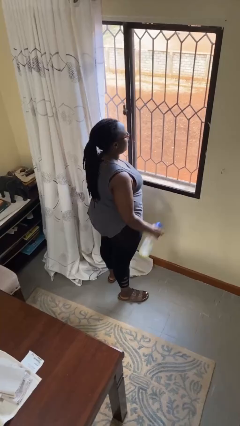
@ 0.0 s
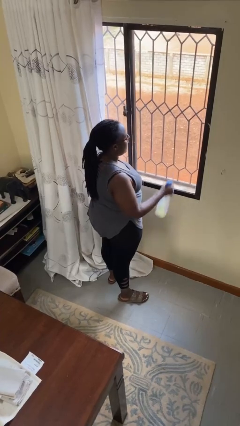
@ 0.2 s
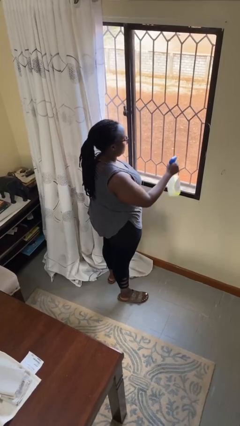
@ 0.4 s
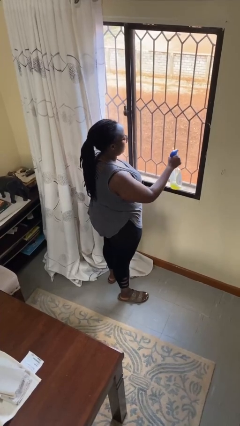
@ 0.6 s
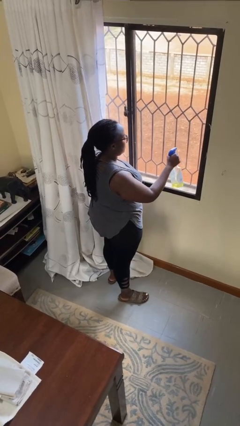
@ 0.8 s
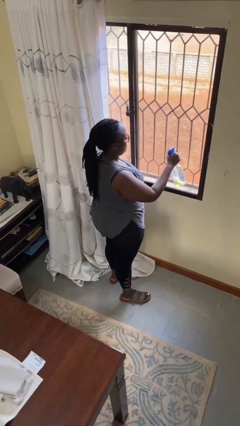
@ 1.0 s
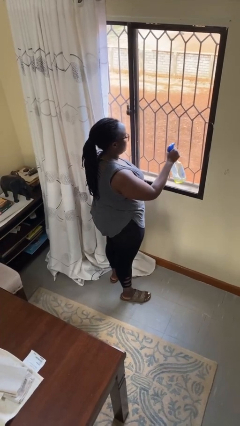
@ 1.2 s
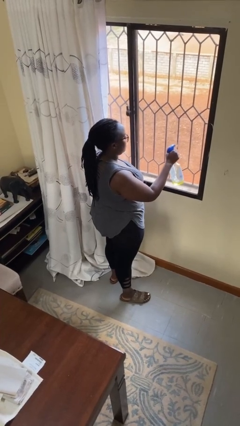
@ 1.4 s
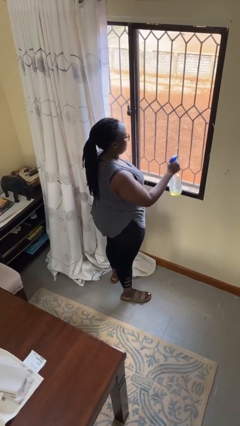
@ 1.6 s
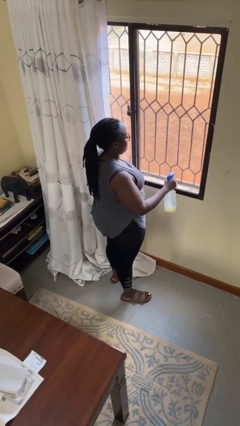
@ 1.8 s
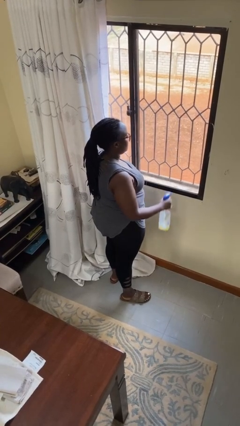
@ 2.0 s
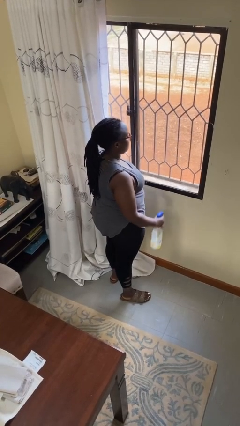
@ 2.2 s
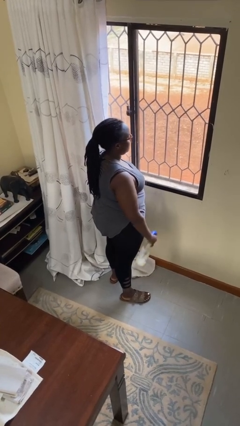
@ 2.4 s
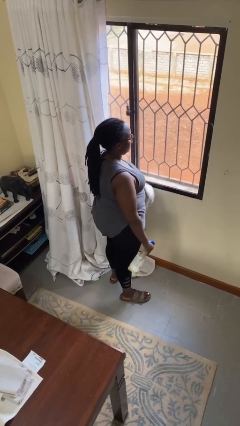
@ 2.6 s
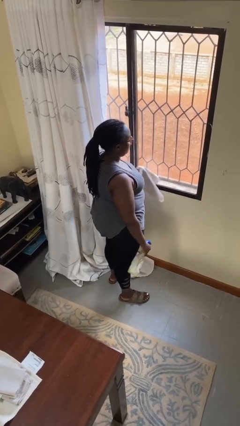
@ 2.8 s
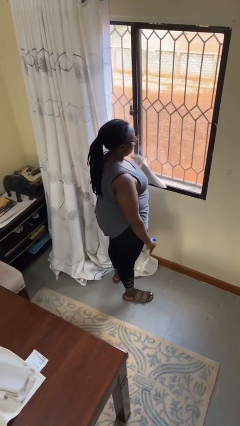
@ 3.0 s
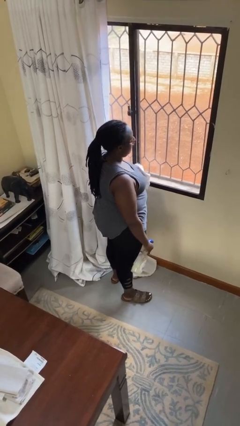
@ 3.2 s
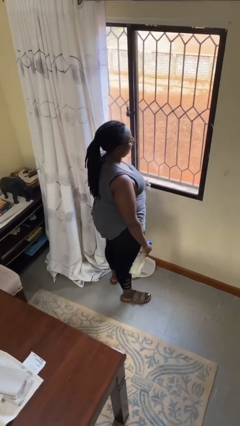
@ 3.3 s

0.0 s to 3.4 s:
person sprays from bottle

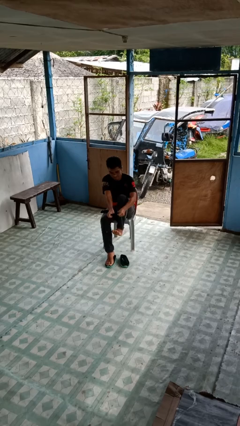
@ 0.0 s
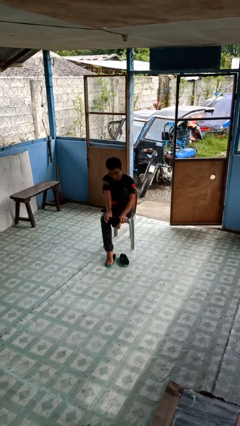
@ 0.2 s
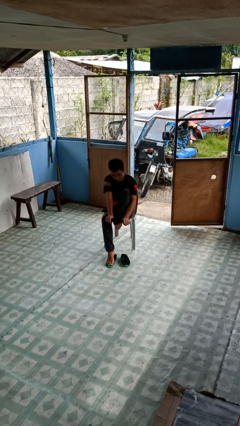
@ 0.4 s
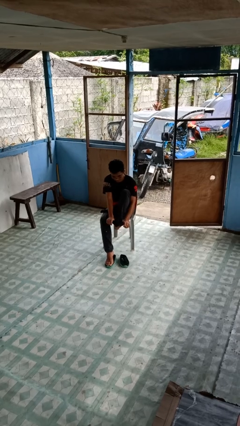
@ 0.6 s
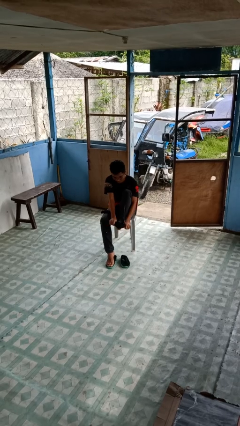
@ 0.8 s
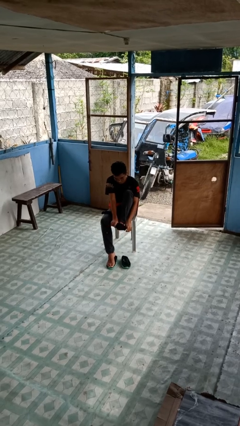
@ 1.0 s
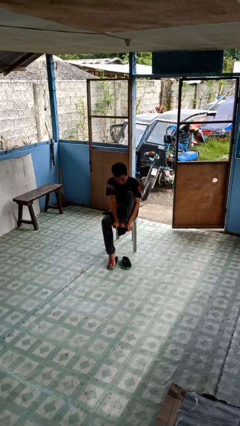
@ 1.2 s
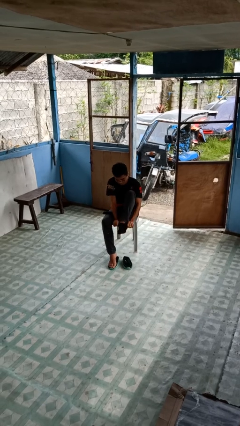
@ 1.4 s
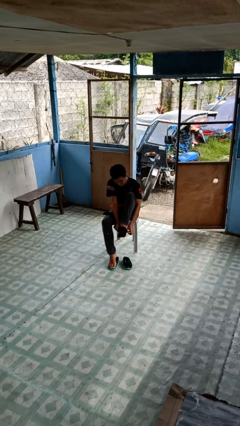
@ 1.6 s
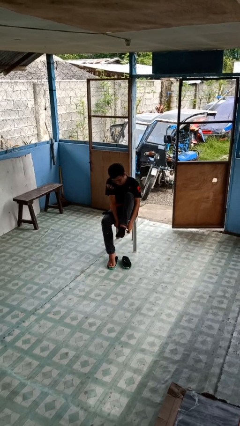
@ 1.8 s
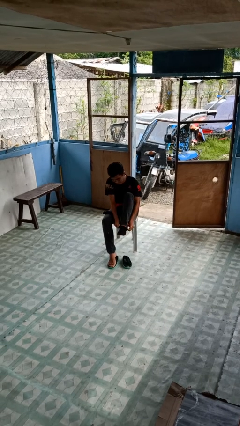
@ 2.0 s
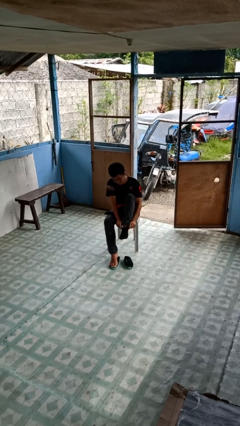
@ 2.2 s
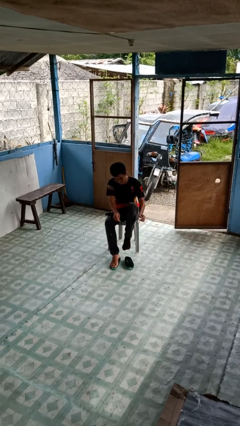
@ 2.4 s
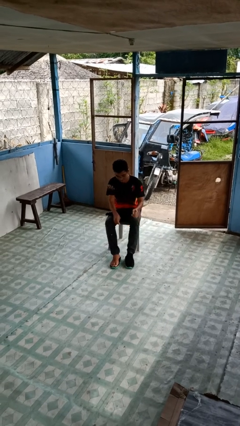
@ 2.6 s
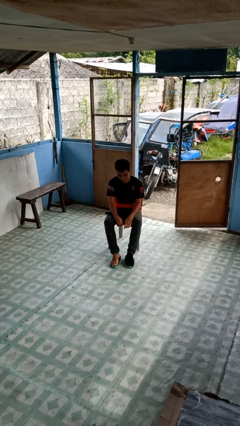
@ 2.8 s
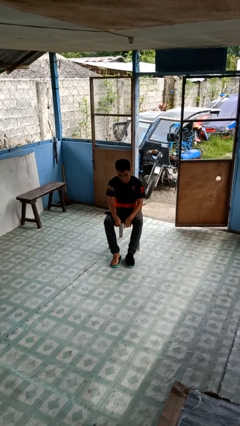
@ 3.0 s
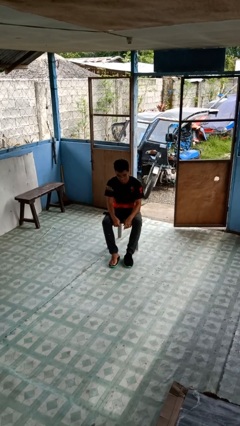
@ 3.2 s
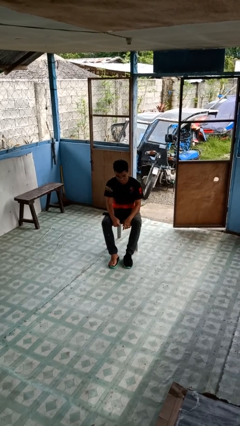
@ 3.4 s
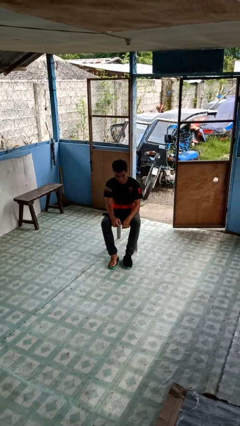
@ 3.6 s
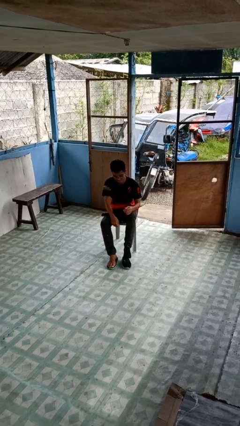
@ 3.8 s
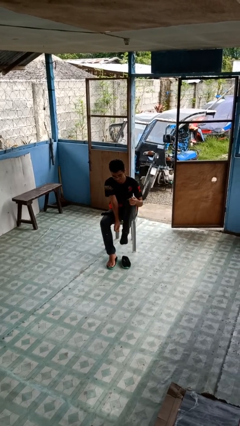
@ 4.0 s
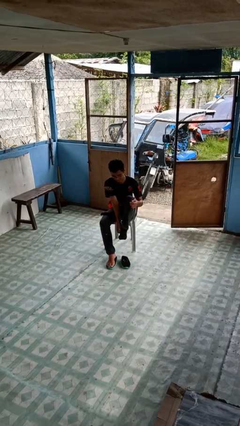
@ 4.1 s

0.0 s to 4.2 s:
person puts on socks

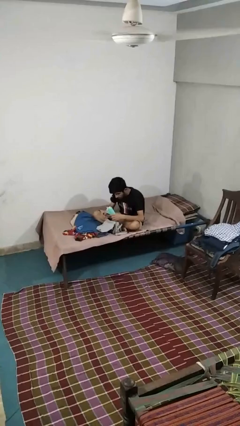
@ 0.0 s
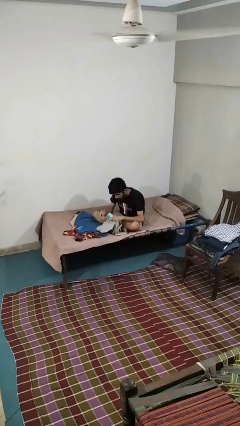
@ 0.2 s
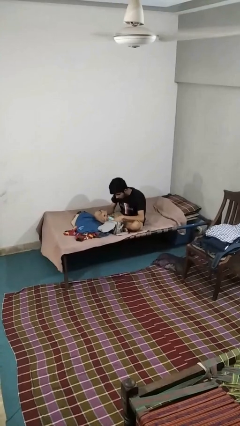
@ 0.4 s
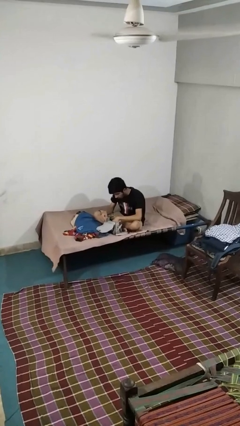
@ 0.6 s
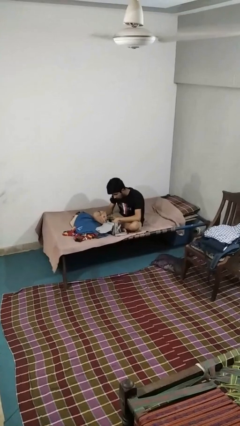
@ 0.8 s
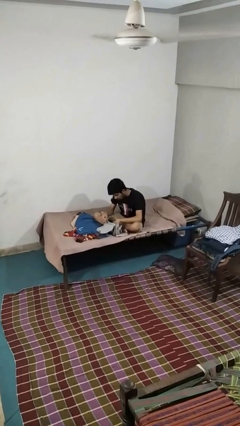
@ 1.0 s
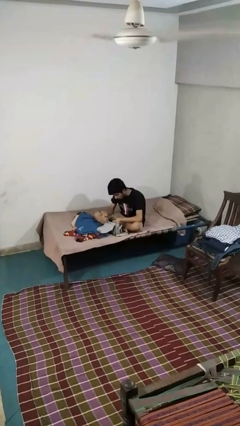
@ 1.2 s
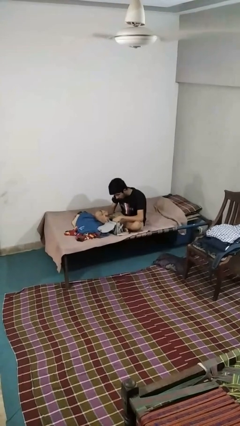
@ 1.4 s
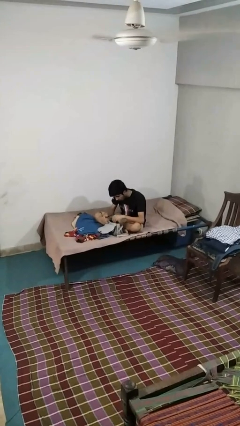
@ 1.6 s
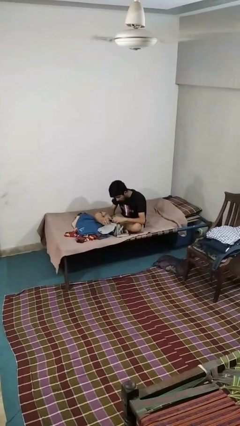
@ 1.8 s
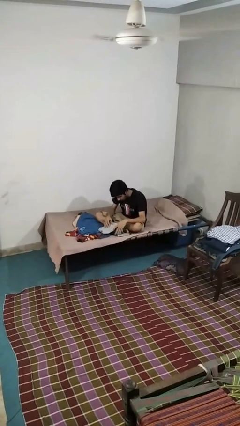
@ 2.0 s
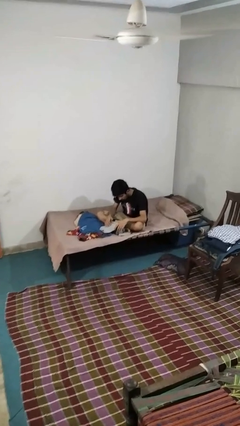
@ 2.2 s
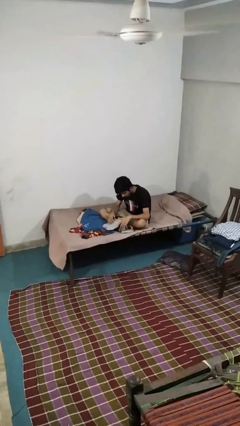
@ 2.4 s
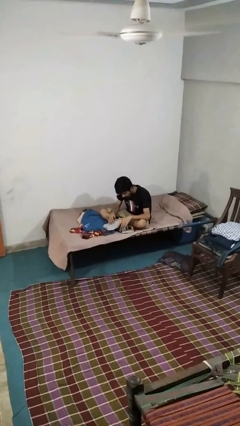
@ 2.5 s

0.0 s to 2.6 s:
person puts object into purse

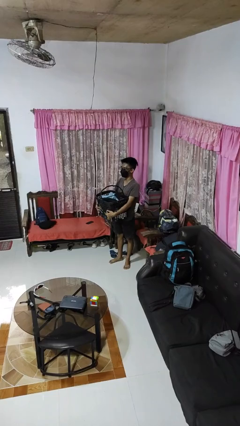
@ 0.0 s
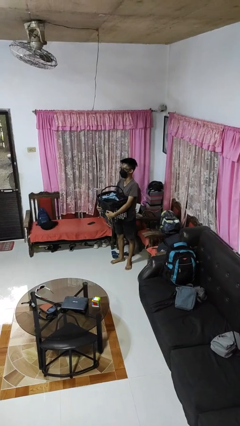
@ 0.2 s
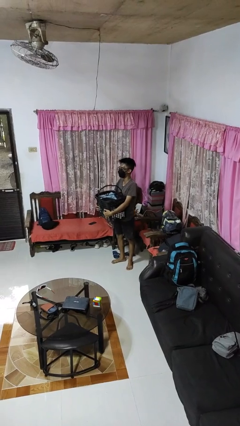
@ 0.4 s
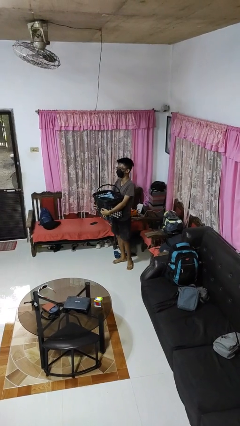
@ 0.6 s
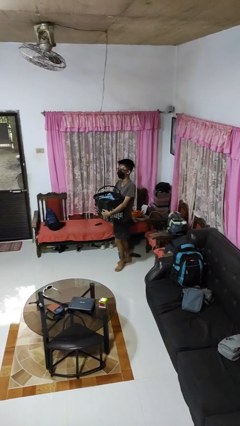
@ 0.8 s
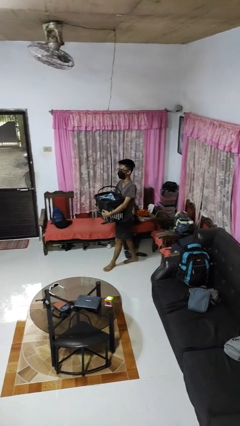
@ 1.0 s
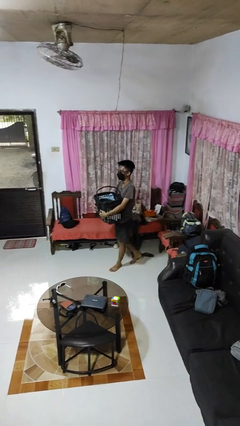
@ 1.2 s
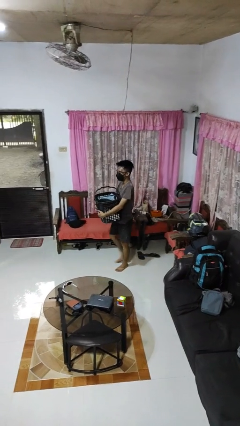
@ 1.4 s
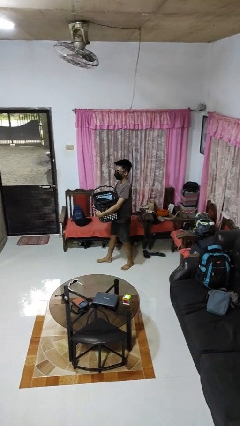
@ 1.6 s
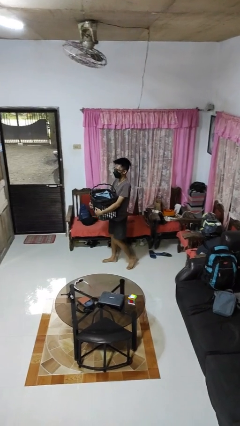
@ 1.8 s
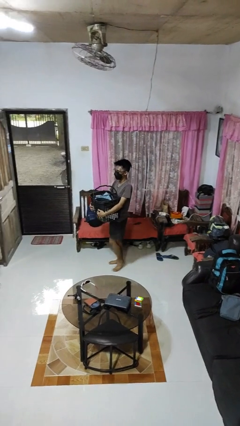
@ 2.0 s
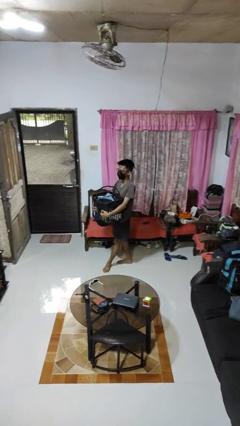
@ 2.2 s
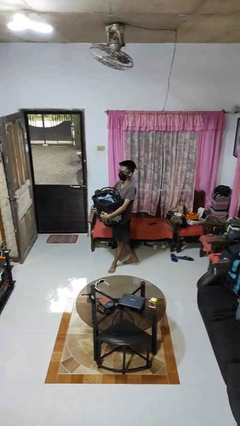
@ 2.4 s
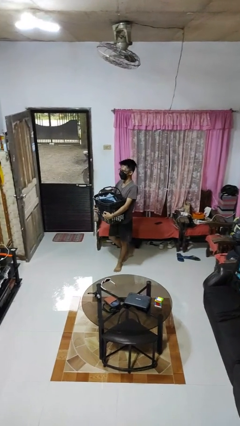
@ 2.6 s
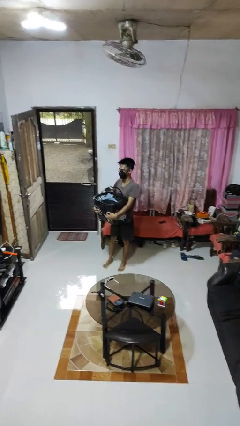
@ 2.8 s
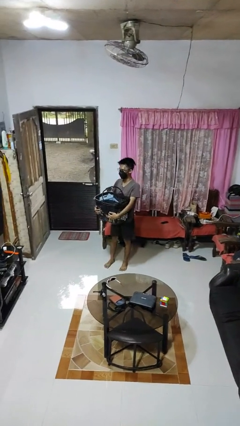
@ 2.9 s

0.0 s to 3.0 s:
person carries laundry basket

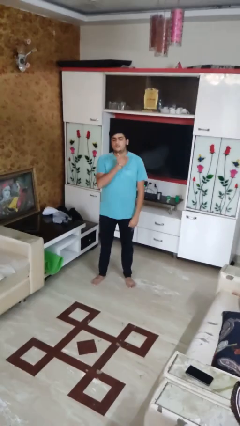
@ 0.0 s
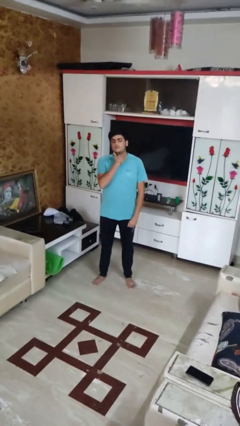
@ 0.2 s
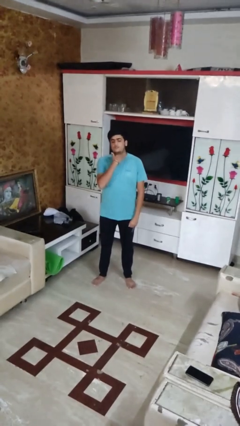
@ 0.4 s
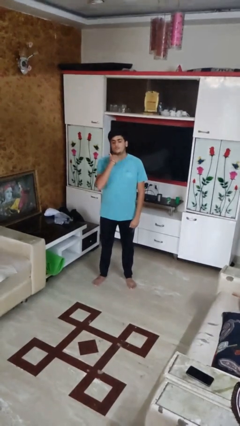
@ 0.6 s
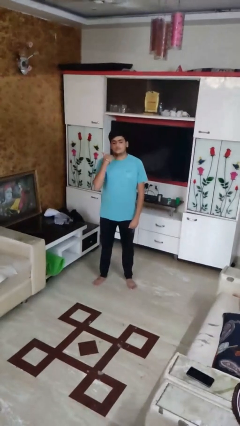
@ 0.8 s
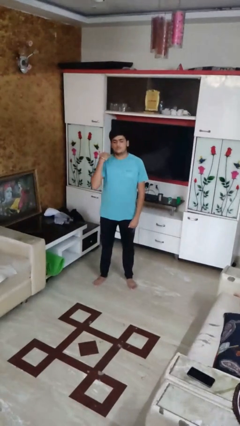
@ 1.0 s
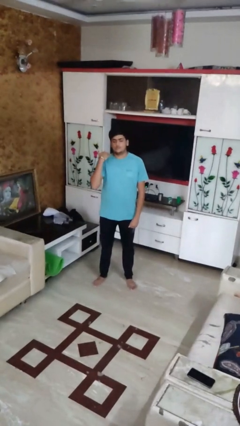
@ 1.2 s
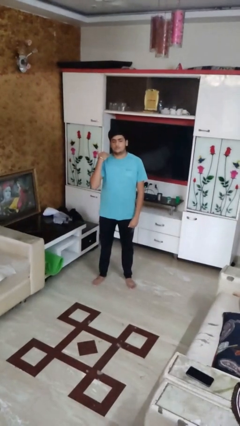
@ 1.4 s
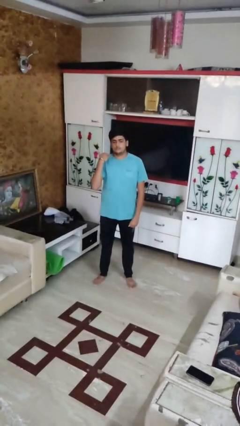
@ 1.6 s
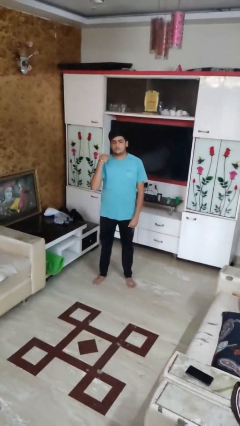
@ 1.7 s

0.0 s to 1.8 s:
person gestures cut

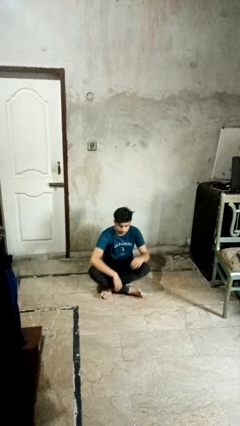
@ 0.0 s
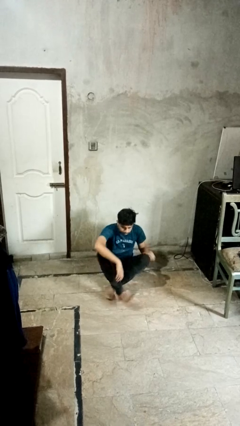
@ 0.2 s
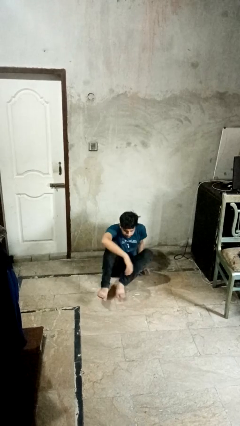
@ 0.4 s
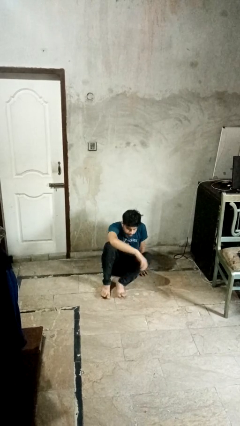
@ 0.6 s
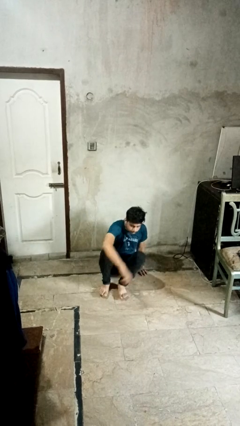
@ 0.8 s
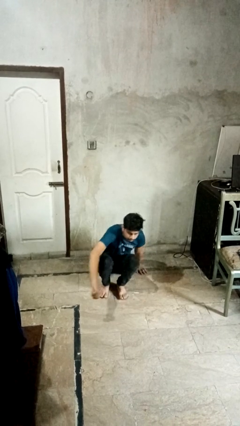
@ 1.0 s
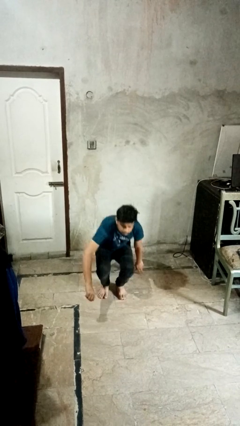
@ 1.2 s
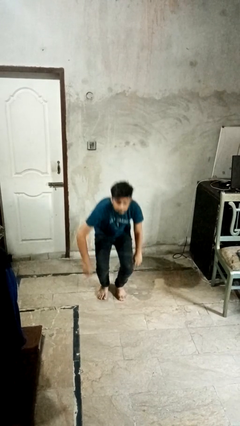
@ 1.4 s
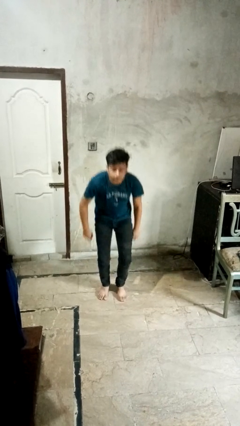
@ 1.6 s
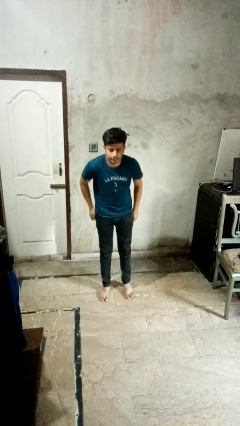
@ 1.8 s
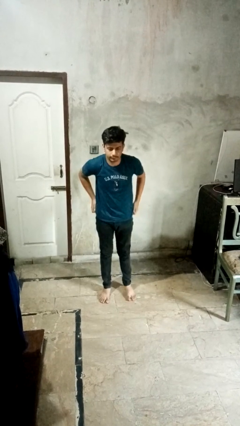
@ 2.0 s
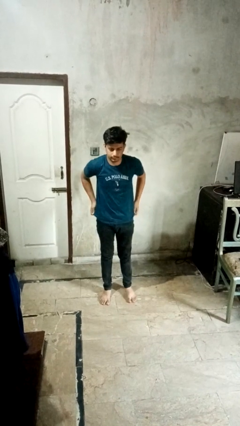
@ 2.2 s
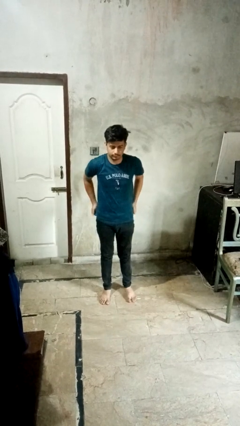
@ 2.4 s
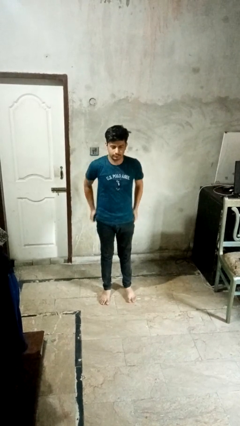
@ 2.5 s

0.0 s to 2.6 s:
person stands up from floor
